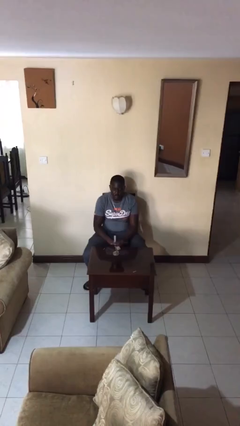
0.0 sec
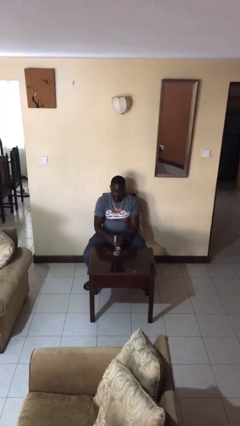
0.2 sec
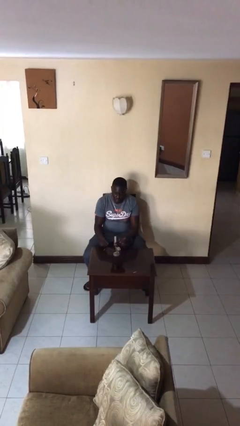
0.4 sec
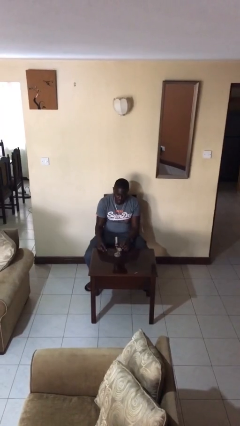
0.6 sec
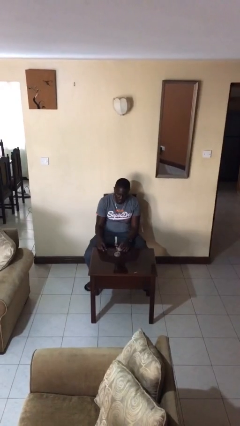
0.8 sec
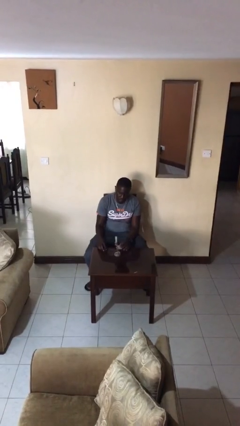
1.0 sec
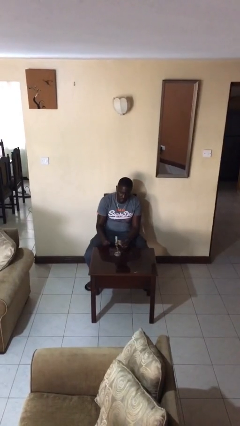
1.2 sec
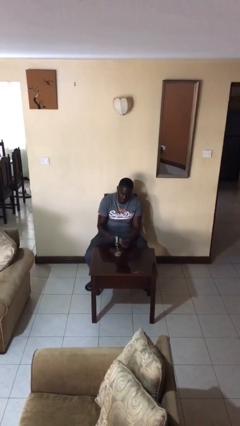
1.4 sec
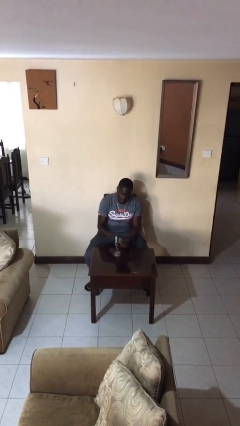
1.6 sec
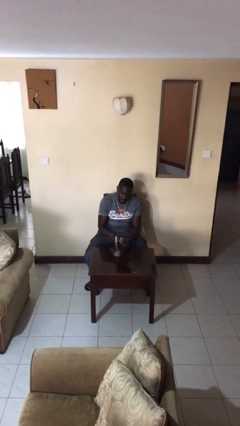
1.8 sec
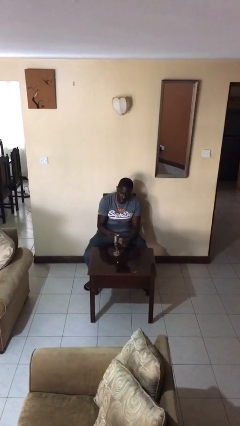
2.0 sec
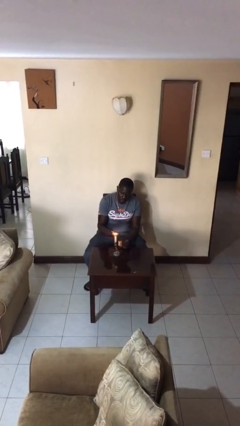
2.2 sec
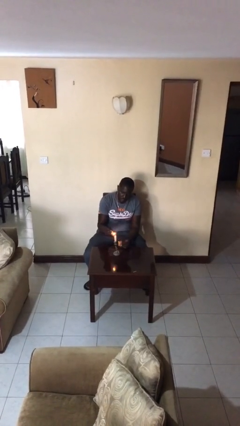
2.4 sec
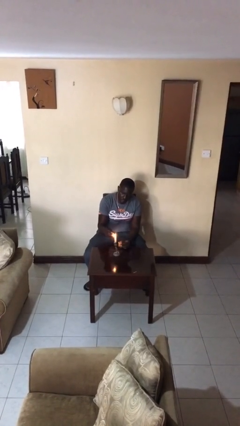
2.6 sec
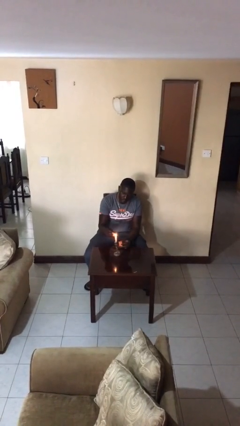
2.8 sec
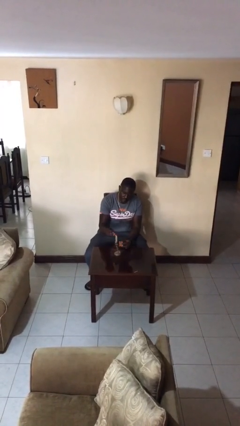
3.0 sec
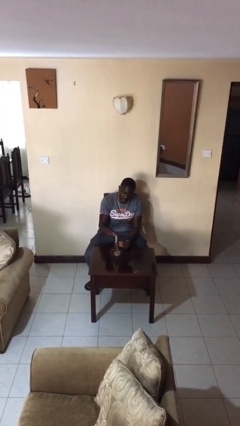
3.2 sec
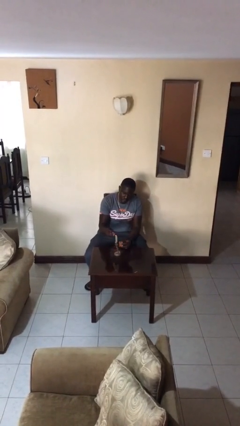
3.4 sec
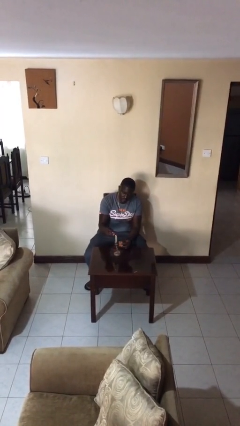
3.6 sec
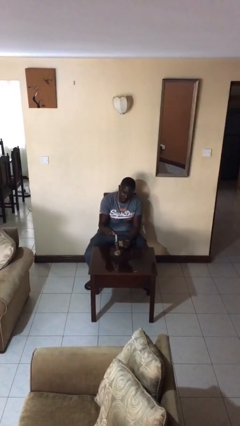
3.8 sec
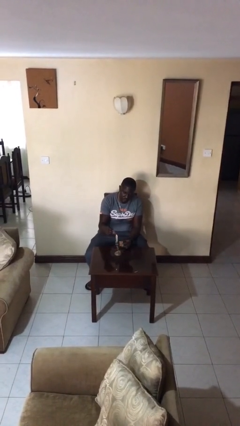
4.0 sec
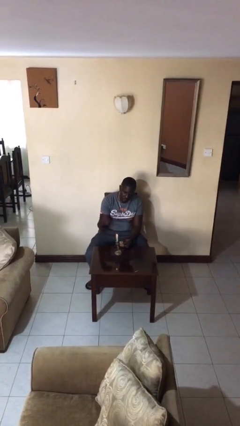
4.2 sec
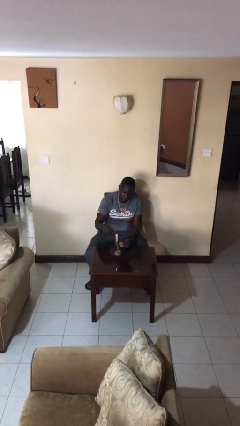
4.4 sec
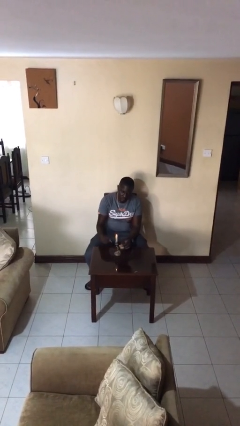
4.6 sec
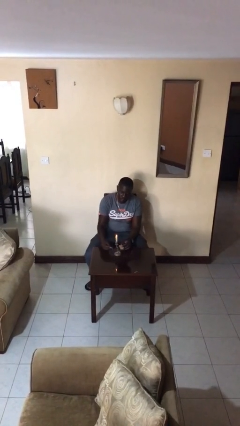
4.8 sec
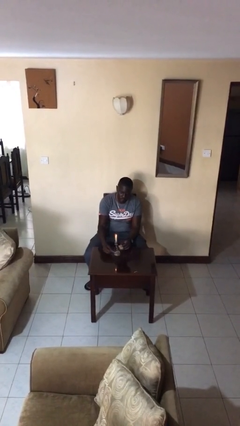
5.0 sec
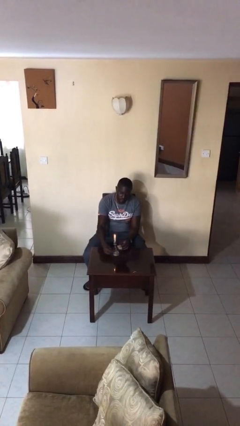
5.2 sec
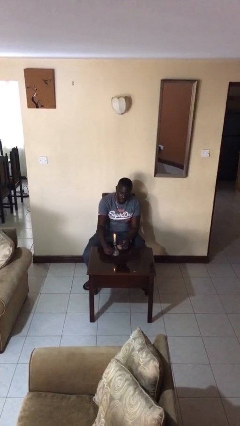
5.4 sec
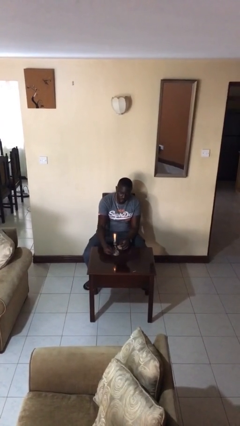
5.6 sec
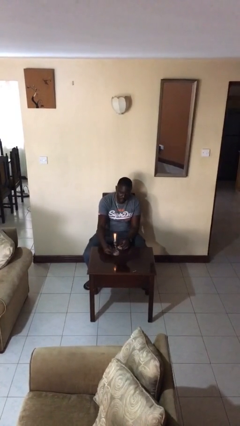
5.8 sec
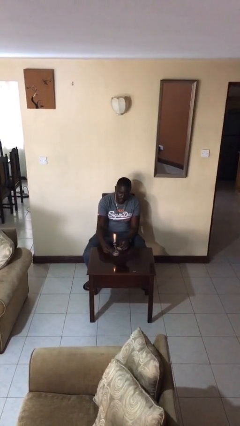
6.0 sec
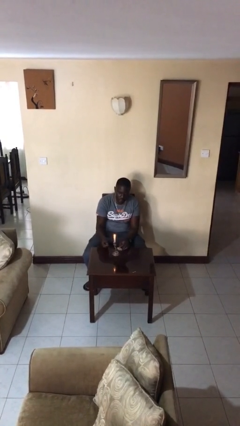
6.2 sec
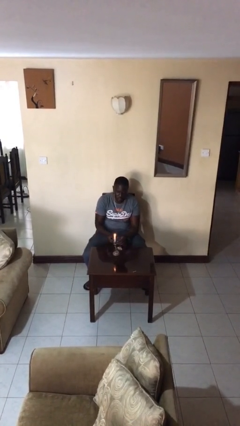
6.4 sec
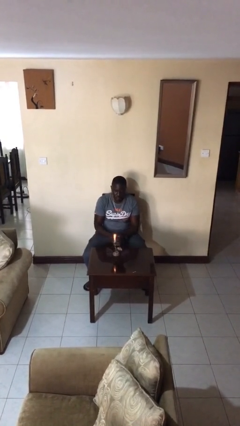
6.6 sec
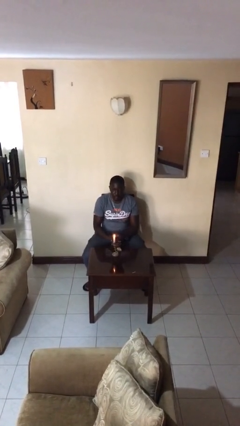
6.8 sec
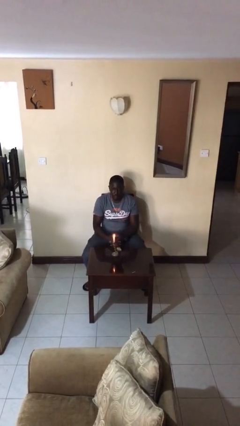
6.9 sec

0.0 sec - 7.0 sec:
person lights candle

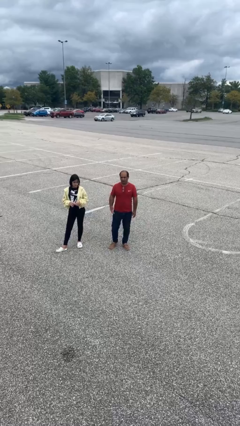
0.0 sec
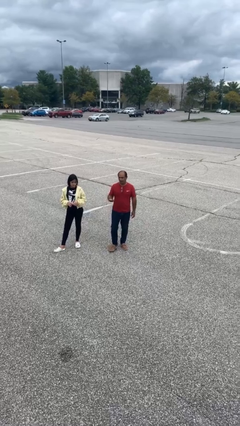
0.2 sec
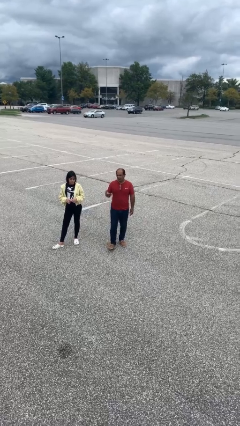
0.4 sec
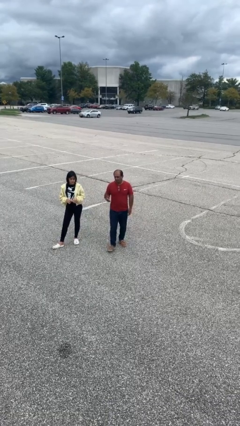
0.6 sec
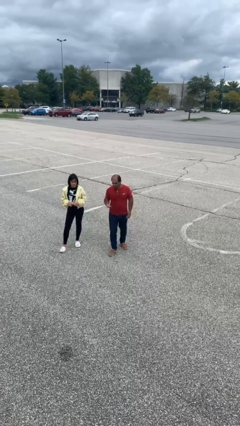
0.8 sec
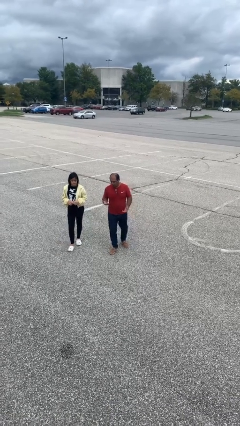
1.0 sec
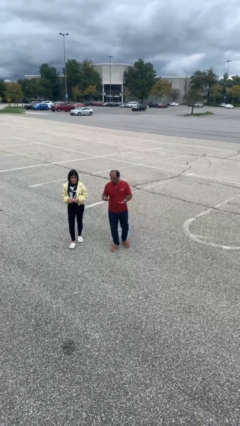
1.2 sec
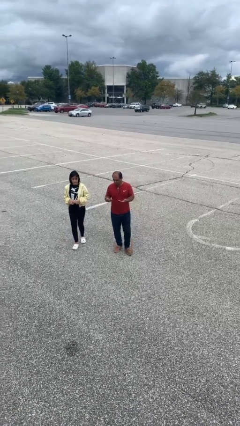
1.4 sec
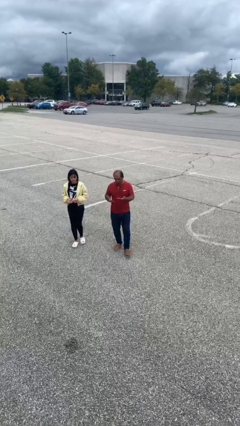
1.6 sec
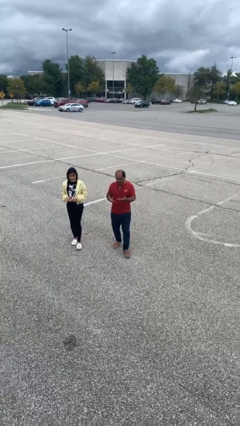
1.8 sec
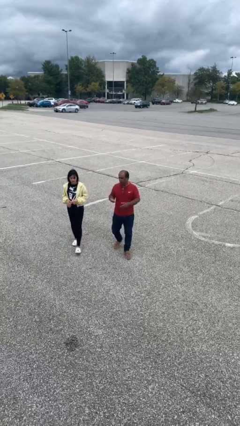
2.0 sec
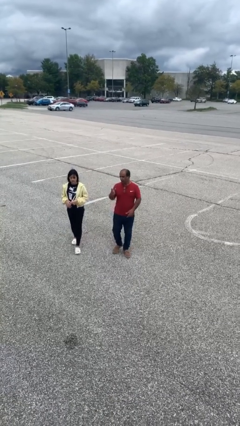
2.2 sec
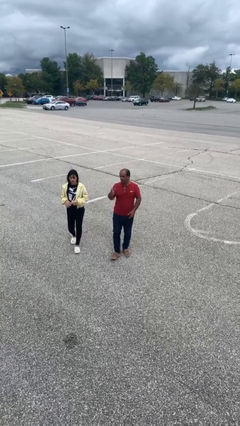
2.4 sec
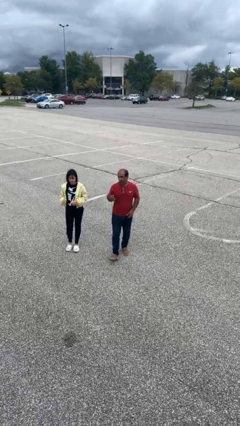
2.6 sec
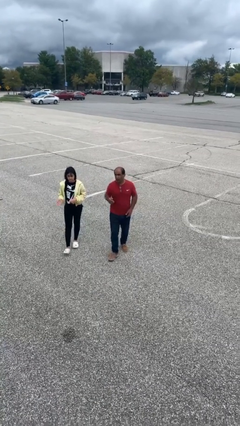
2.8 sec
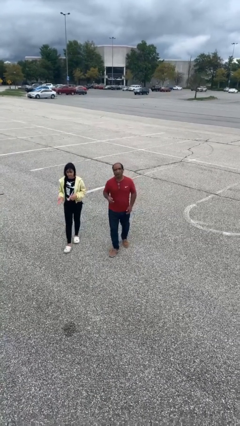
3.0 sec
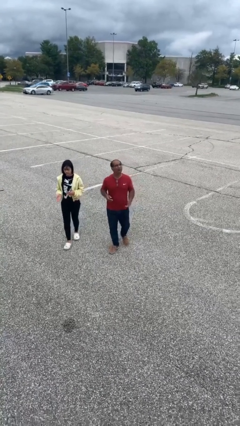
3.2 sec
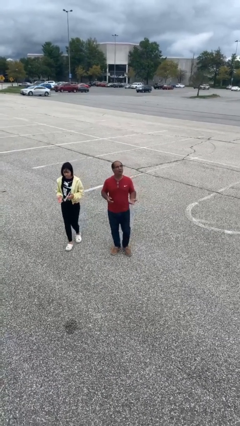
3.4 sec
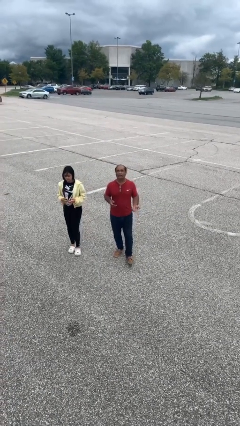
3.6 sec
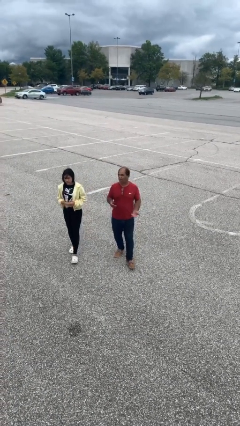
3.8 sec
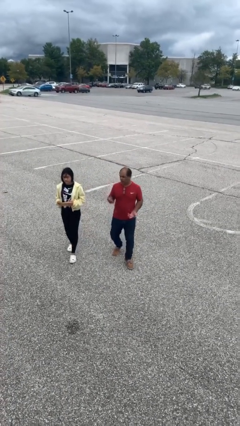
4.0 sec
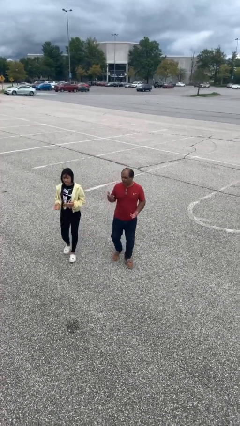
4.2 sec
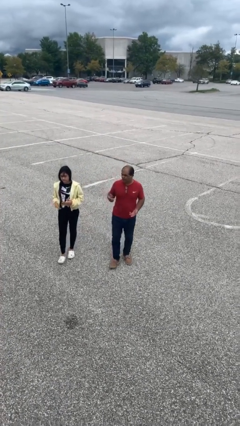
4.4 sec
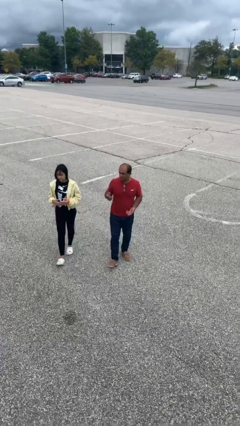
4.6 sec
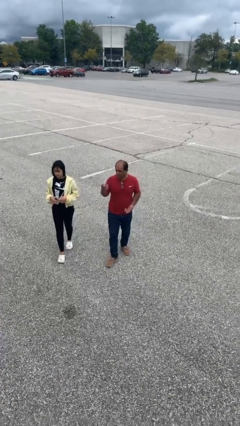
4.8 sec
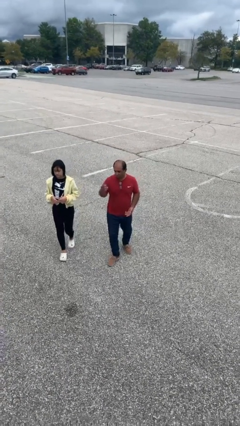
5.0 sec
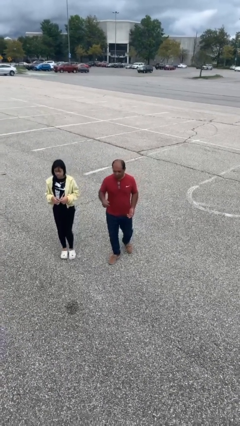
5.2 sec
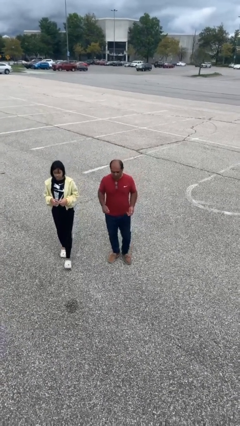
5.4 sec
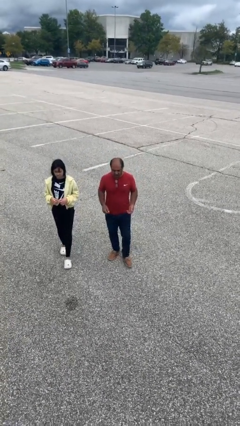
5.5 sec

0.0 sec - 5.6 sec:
person talks to person

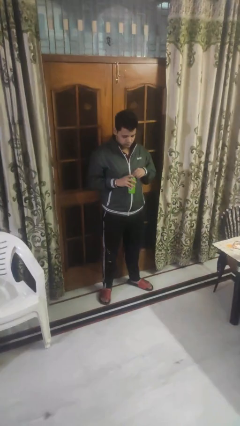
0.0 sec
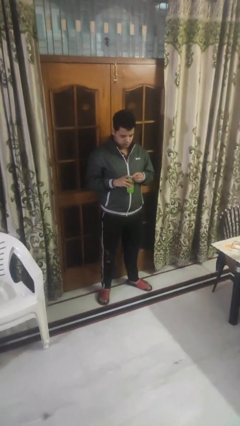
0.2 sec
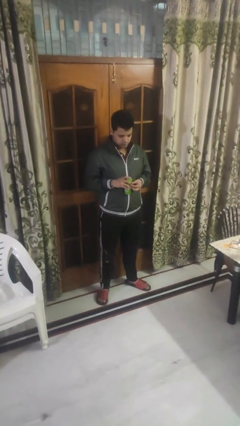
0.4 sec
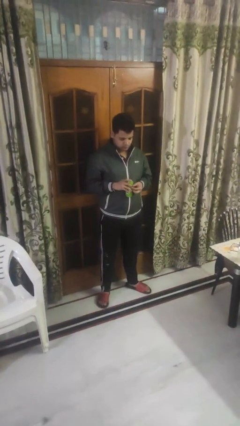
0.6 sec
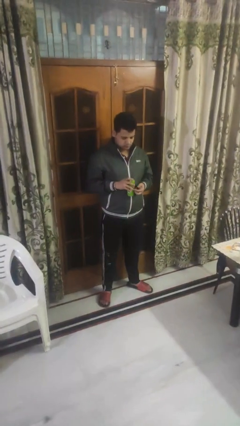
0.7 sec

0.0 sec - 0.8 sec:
person opens beverage can

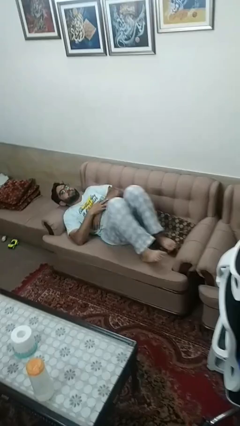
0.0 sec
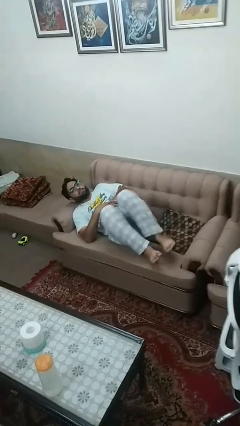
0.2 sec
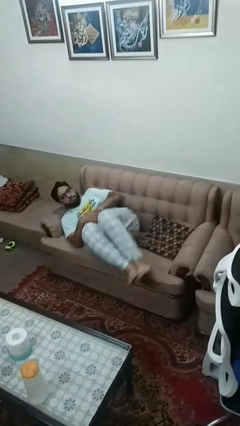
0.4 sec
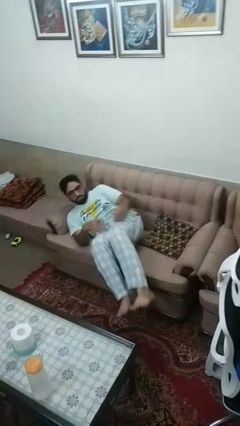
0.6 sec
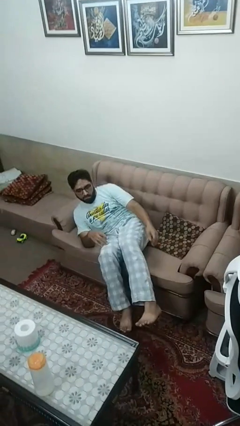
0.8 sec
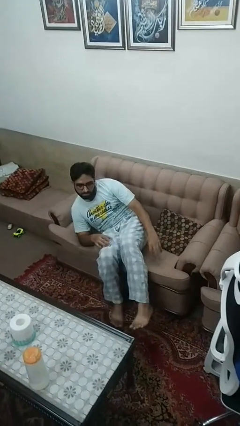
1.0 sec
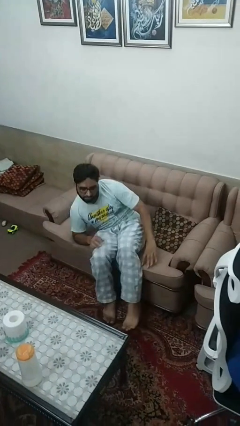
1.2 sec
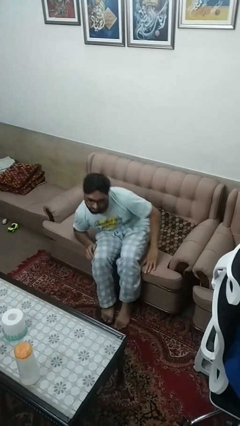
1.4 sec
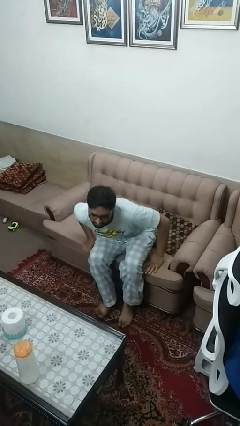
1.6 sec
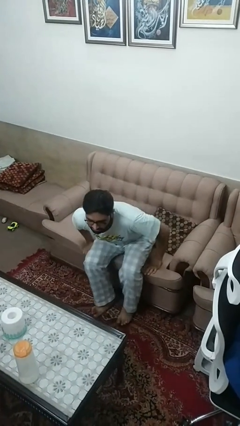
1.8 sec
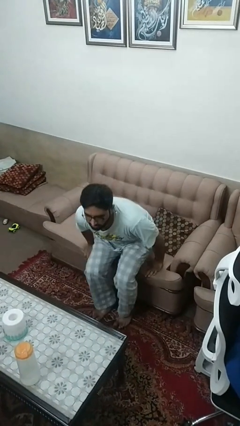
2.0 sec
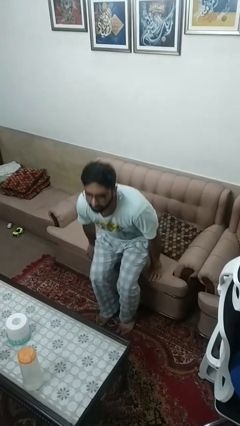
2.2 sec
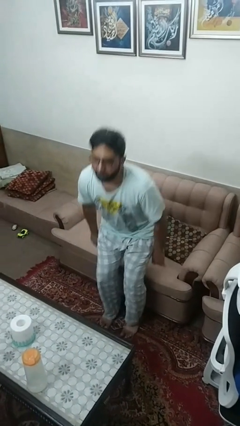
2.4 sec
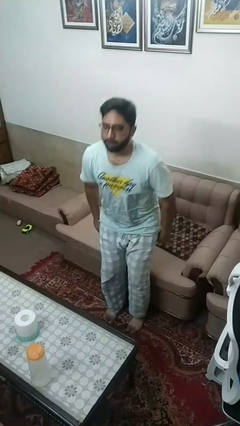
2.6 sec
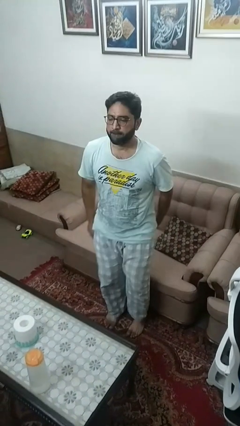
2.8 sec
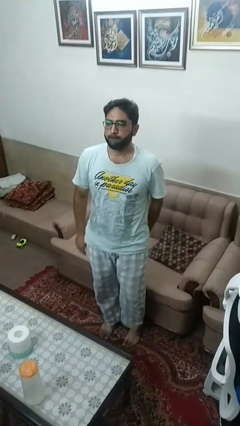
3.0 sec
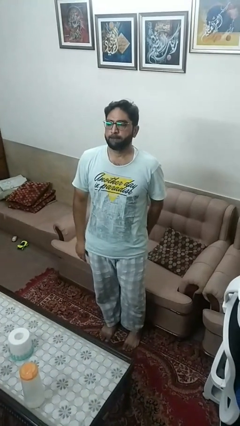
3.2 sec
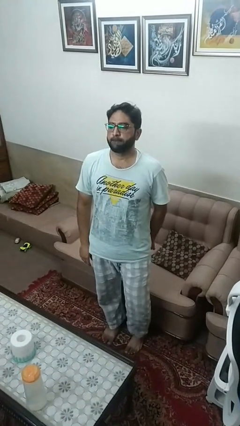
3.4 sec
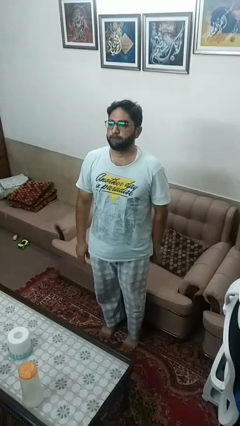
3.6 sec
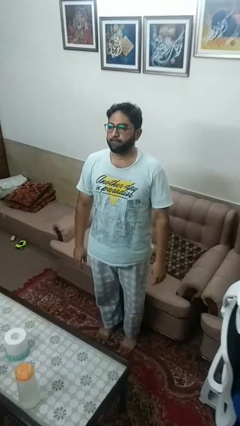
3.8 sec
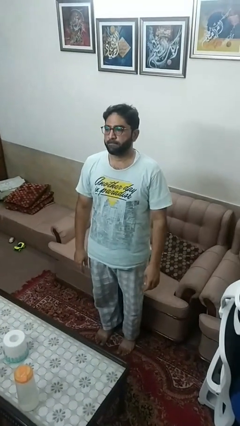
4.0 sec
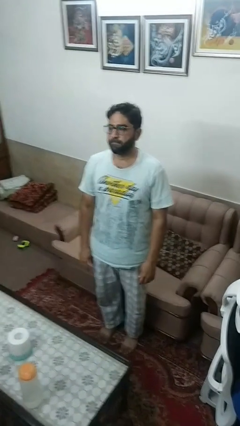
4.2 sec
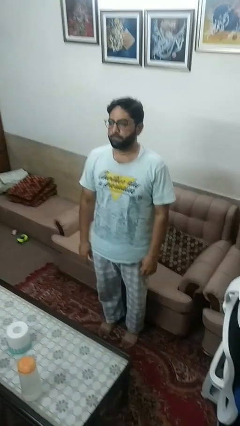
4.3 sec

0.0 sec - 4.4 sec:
person stands up
